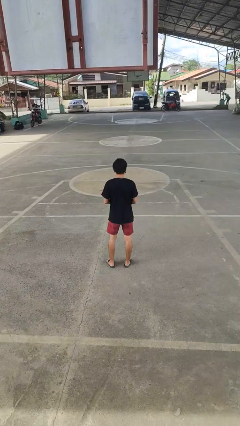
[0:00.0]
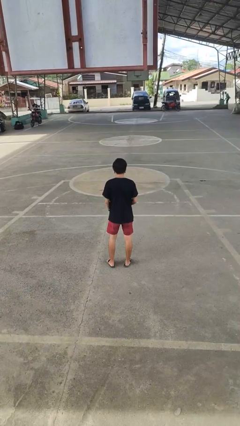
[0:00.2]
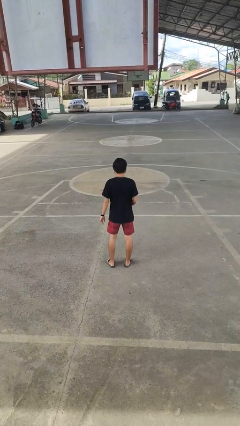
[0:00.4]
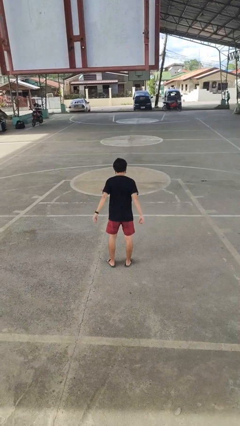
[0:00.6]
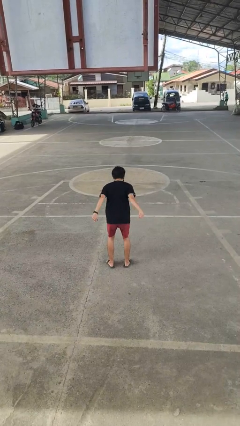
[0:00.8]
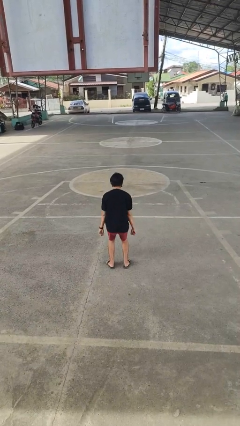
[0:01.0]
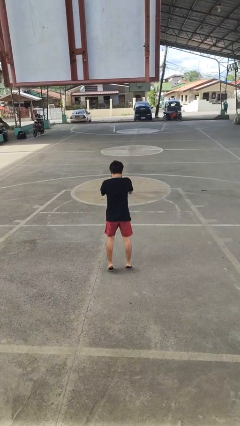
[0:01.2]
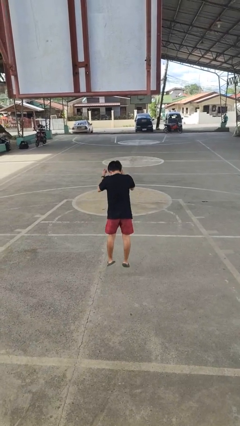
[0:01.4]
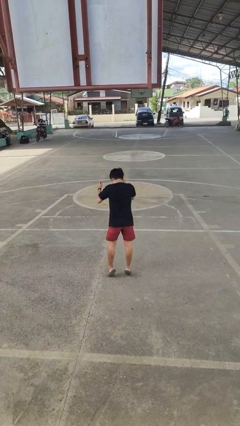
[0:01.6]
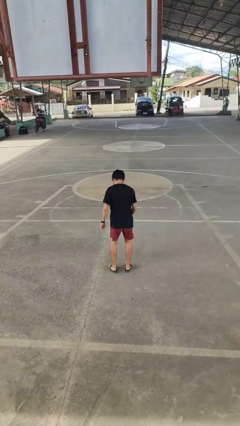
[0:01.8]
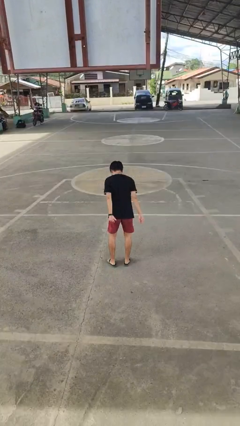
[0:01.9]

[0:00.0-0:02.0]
person jumps

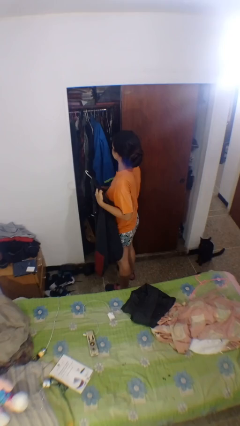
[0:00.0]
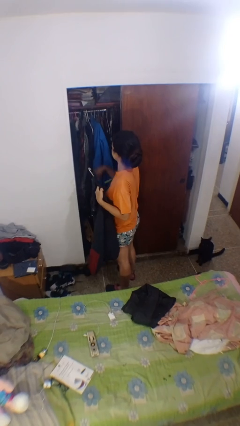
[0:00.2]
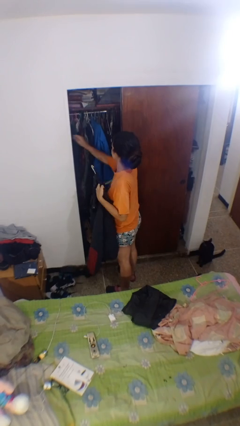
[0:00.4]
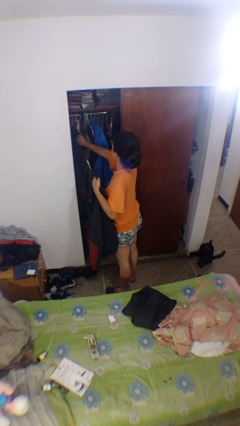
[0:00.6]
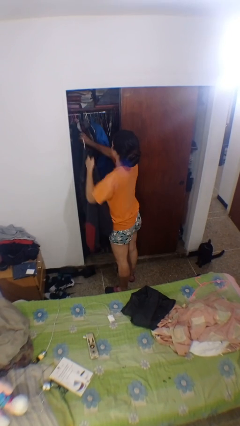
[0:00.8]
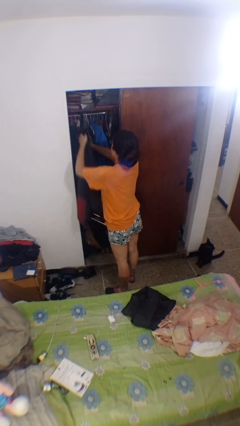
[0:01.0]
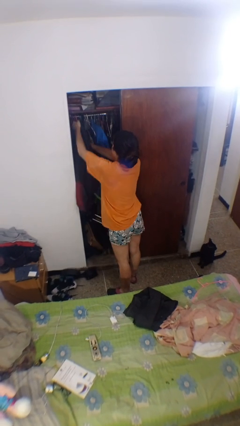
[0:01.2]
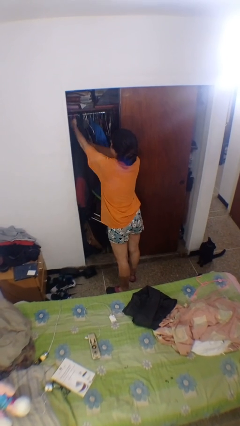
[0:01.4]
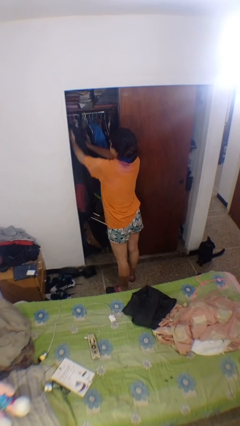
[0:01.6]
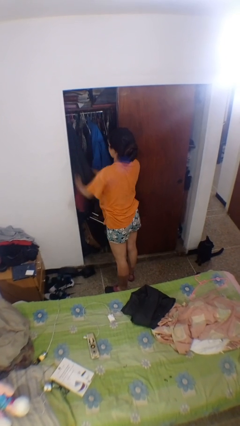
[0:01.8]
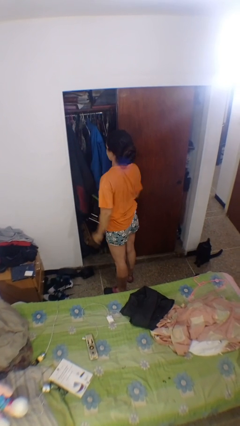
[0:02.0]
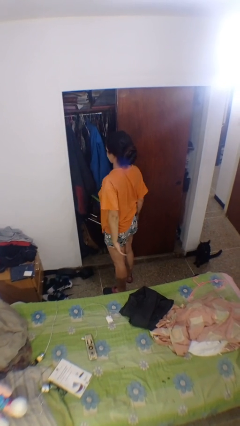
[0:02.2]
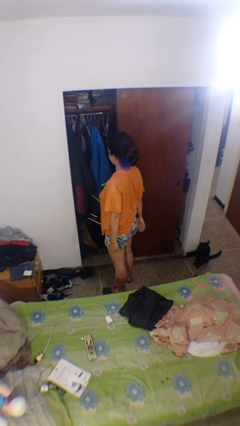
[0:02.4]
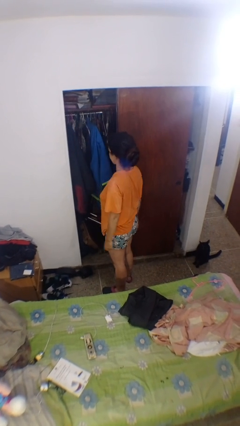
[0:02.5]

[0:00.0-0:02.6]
person puts clothes into closet

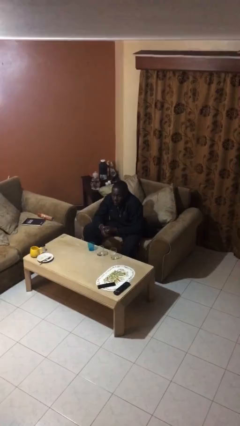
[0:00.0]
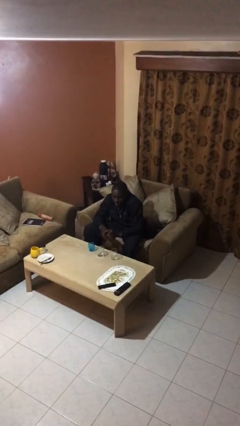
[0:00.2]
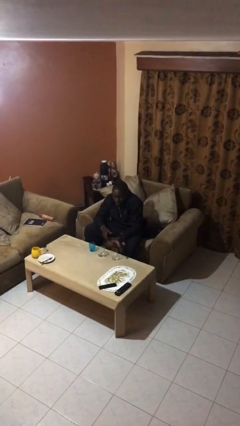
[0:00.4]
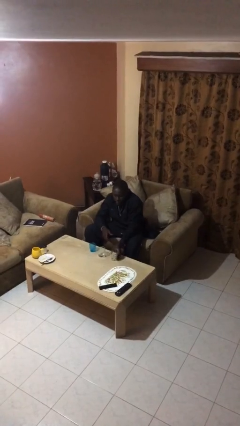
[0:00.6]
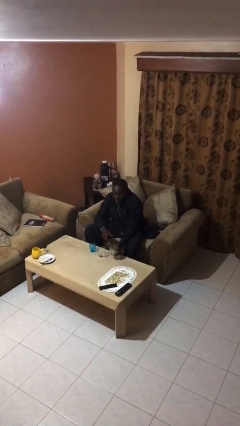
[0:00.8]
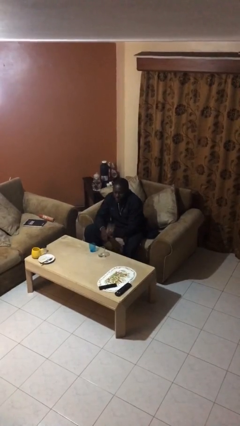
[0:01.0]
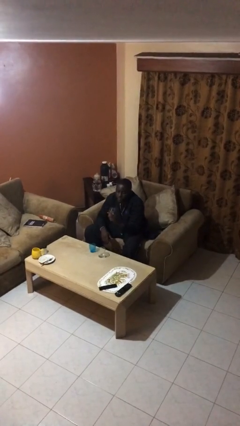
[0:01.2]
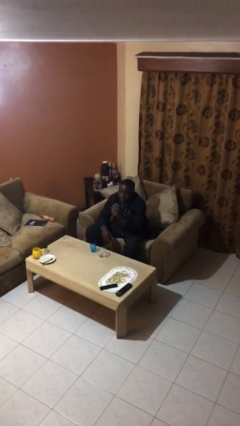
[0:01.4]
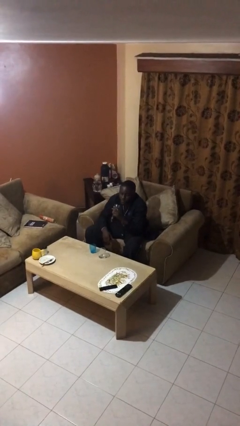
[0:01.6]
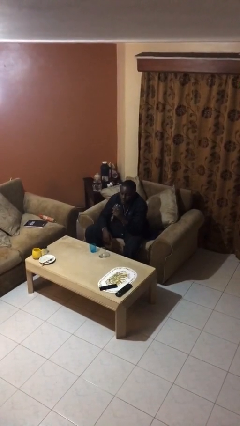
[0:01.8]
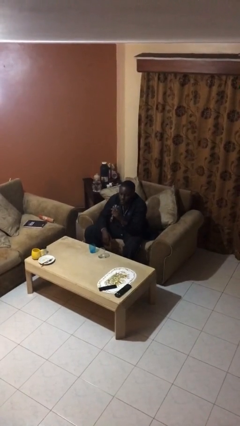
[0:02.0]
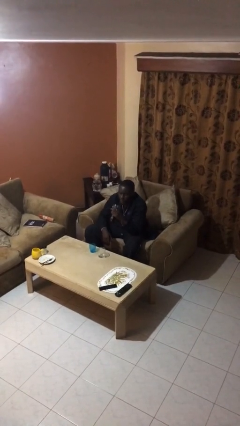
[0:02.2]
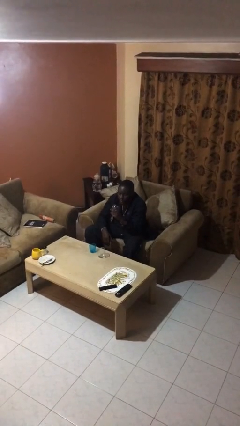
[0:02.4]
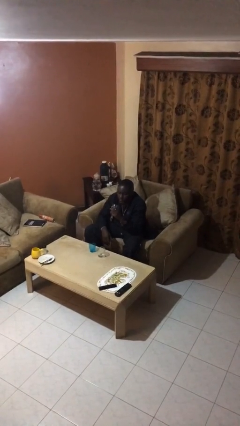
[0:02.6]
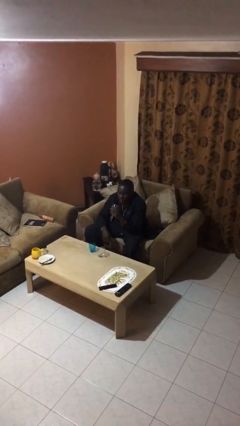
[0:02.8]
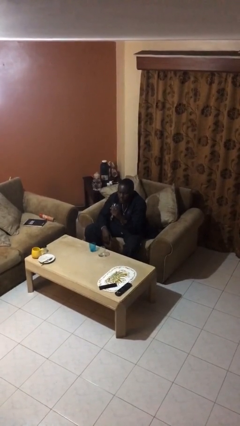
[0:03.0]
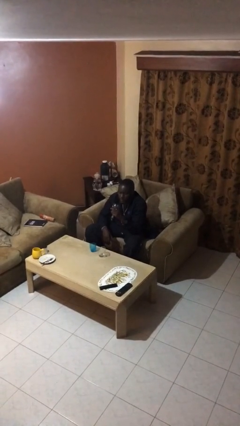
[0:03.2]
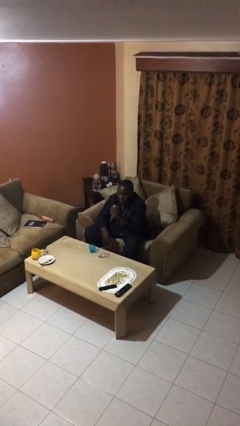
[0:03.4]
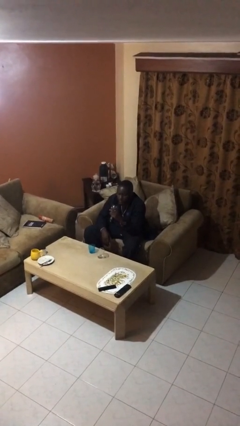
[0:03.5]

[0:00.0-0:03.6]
person picks up object from table

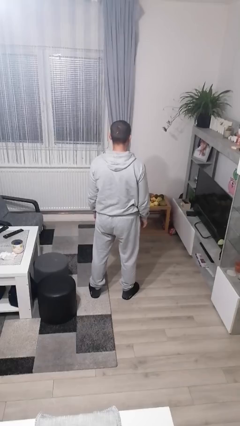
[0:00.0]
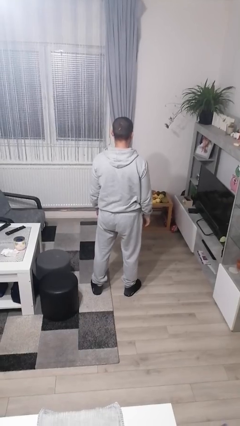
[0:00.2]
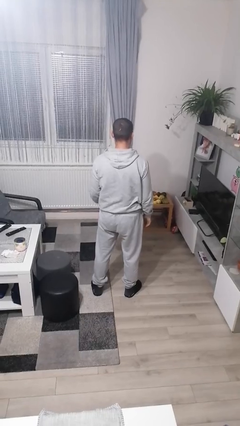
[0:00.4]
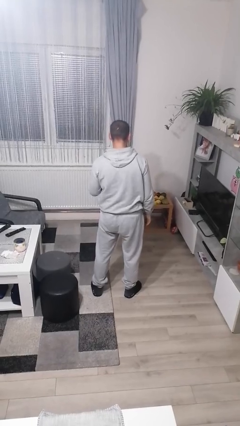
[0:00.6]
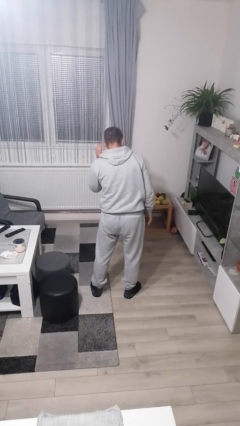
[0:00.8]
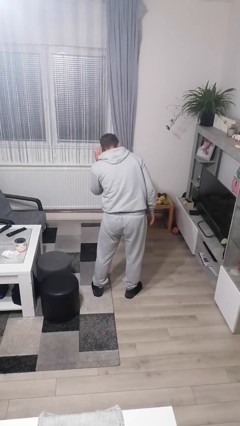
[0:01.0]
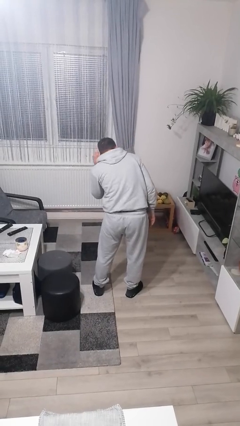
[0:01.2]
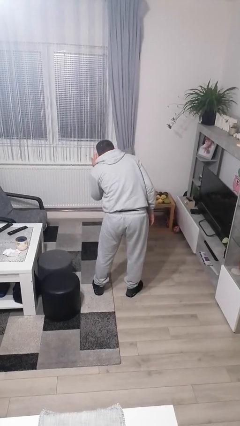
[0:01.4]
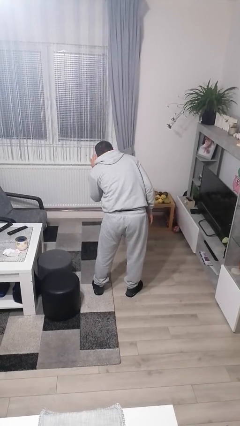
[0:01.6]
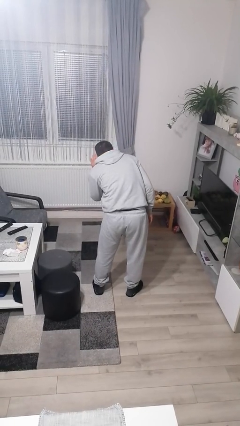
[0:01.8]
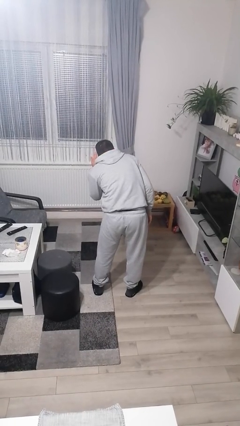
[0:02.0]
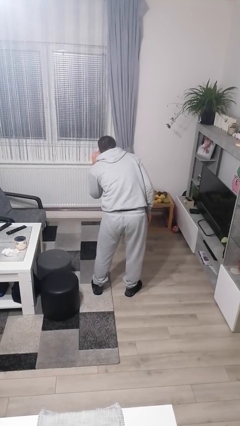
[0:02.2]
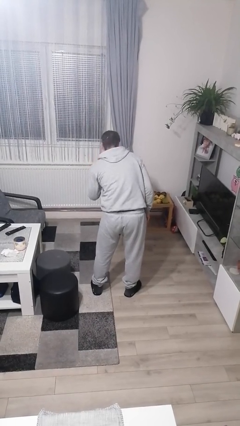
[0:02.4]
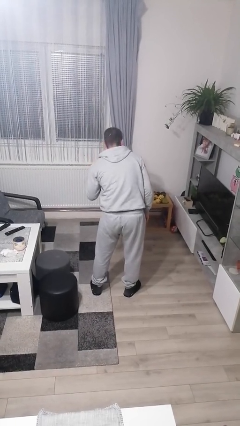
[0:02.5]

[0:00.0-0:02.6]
person gestures listen closely

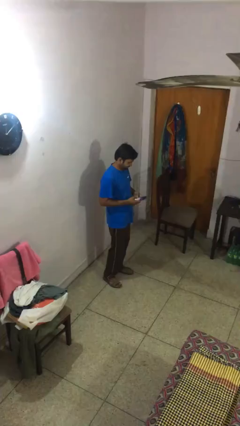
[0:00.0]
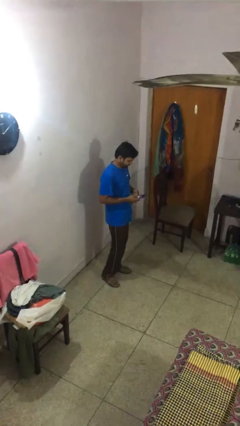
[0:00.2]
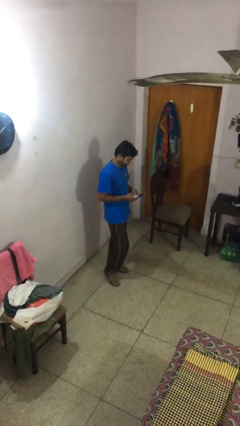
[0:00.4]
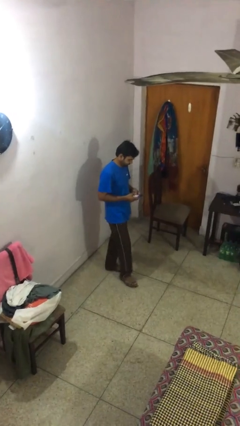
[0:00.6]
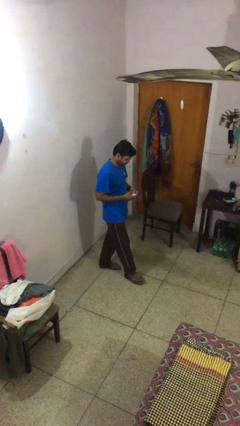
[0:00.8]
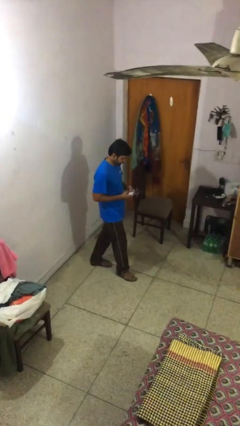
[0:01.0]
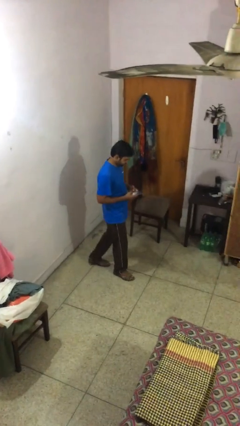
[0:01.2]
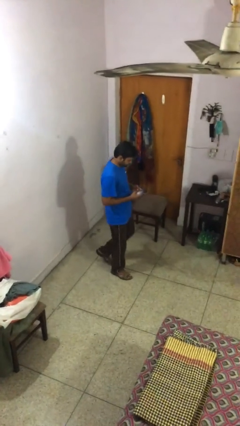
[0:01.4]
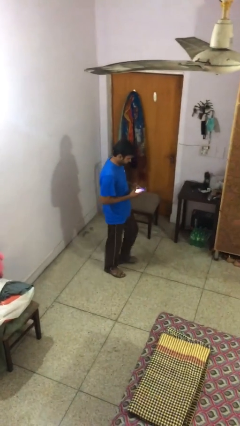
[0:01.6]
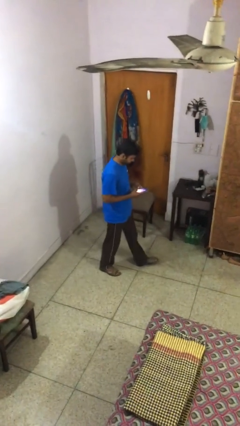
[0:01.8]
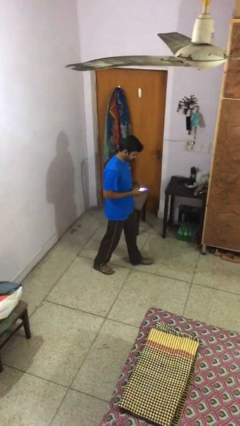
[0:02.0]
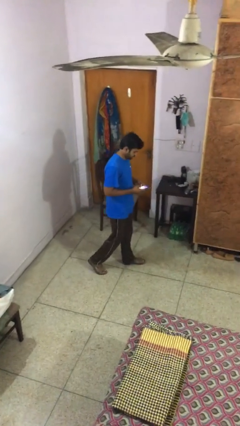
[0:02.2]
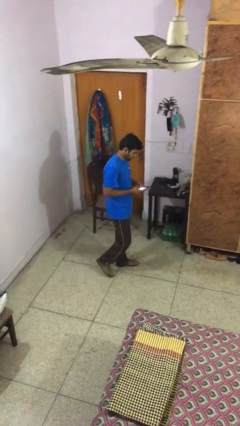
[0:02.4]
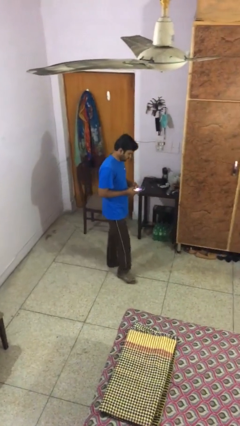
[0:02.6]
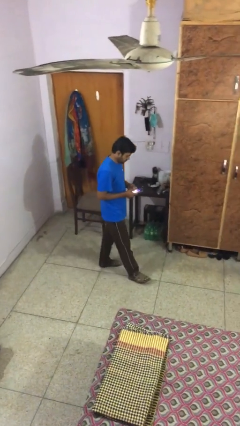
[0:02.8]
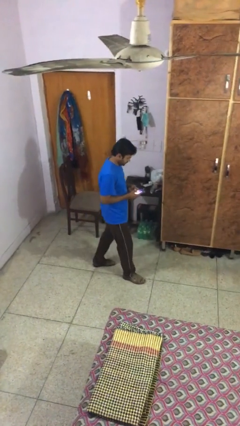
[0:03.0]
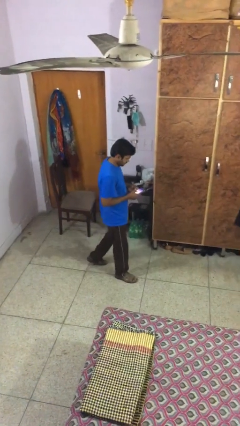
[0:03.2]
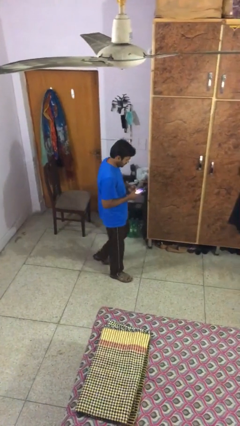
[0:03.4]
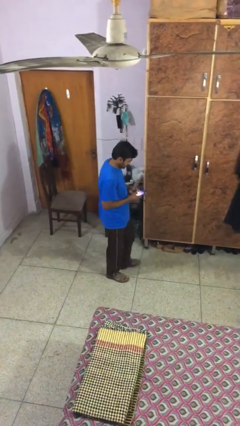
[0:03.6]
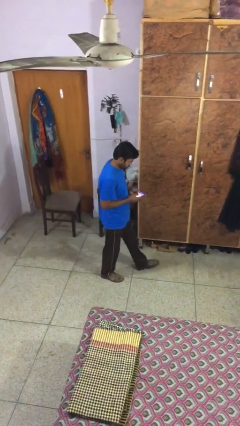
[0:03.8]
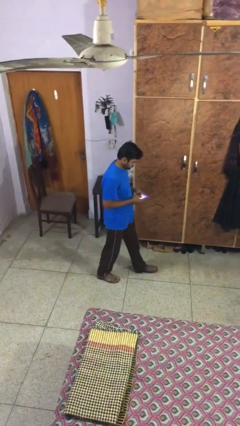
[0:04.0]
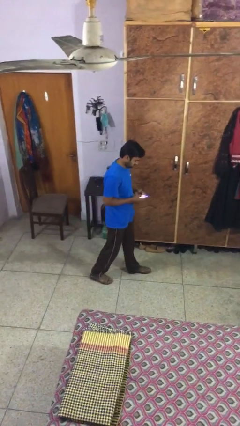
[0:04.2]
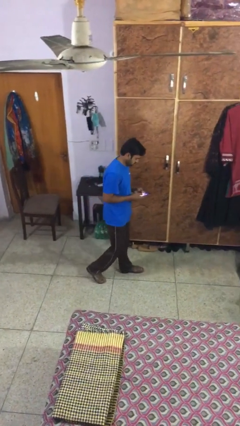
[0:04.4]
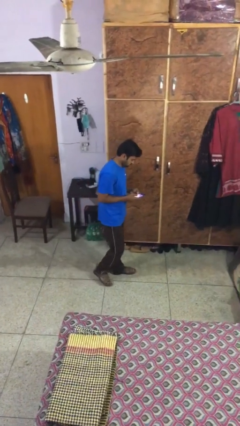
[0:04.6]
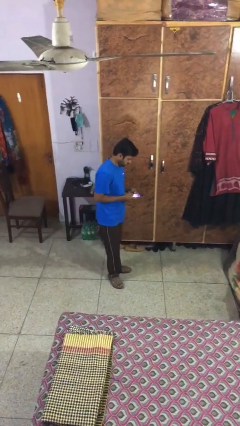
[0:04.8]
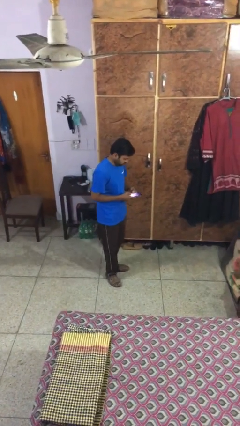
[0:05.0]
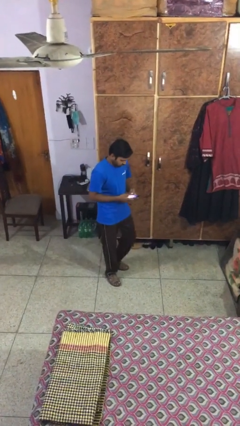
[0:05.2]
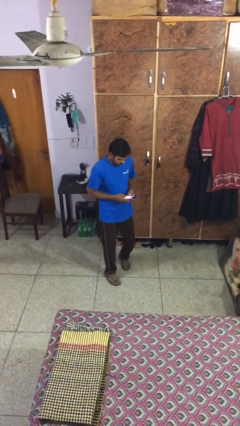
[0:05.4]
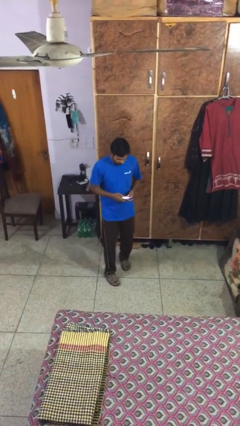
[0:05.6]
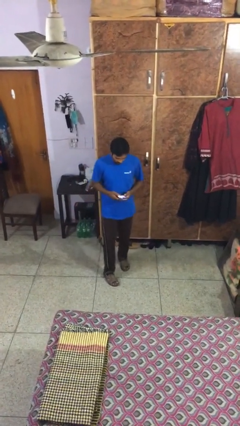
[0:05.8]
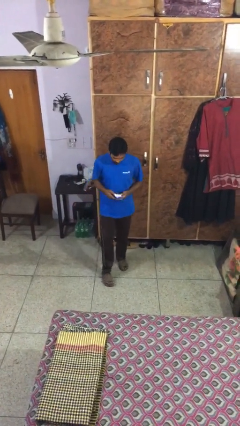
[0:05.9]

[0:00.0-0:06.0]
person texts on phone

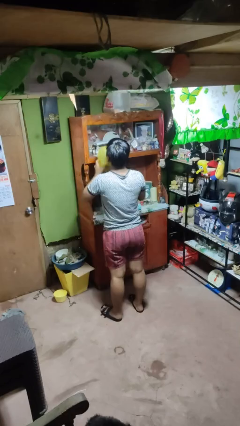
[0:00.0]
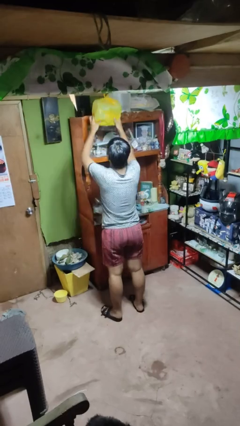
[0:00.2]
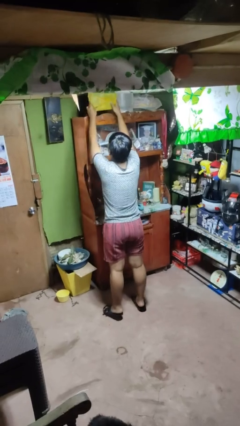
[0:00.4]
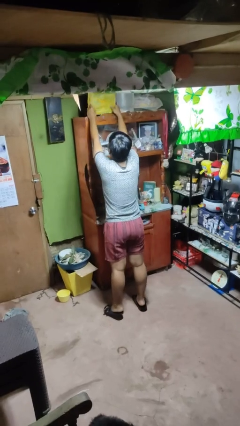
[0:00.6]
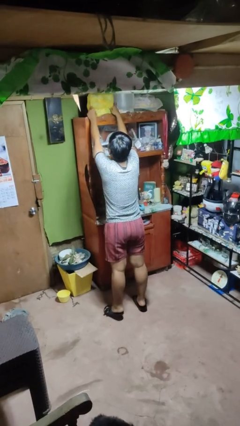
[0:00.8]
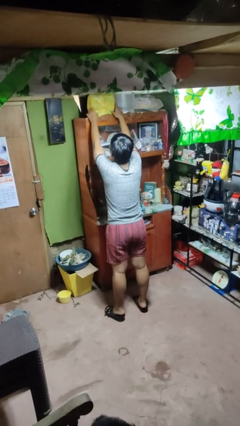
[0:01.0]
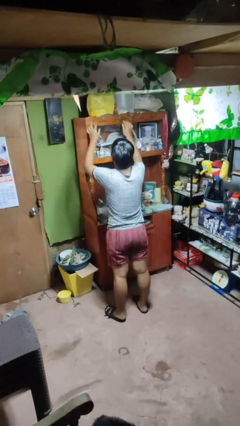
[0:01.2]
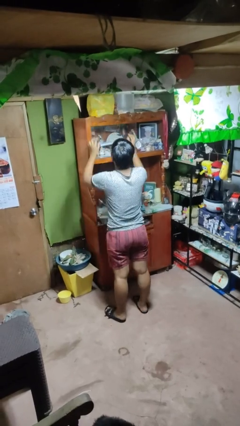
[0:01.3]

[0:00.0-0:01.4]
person puts down object on shelf
